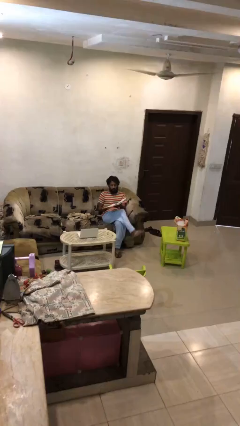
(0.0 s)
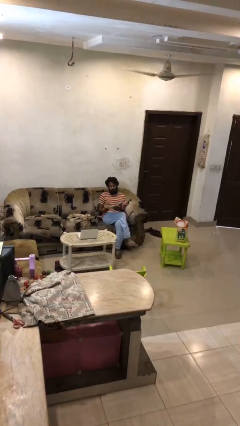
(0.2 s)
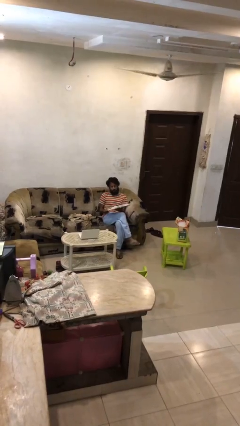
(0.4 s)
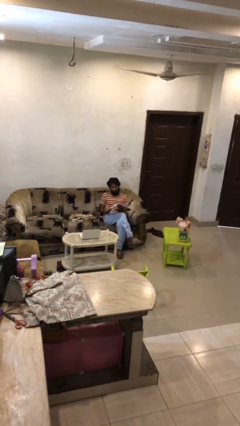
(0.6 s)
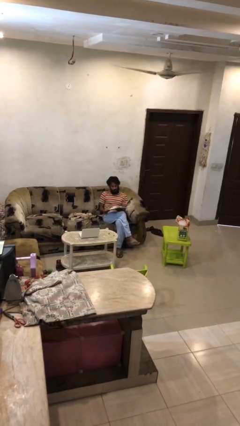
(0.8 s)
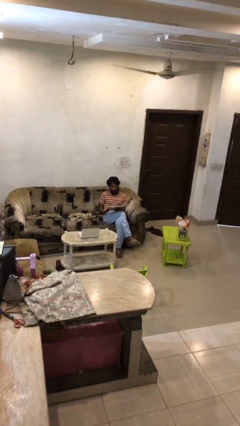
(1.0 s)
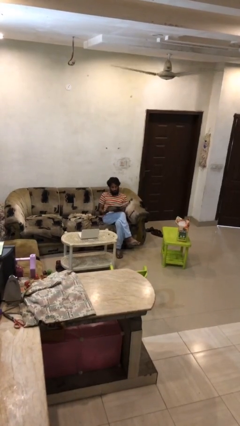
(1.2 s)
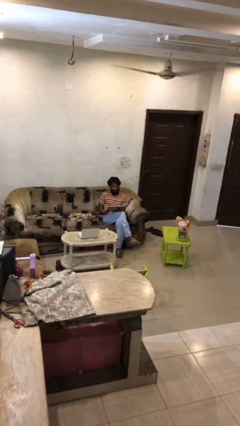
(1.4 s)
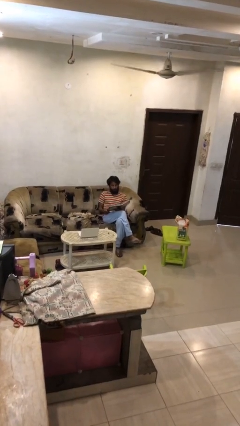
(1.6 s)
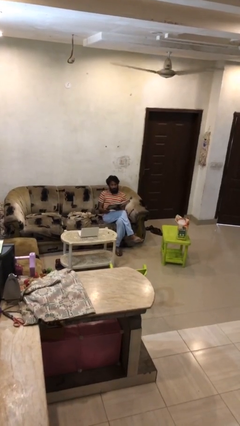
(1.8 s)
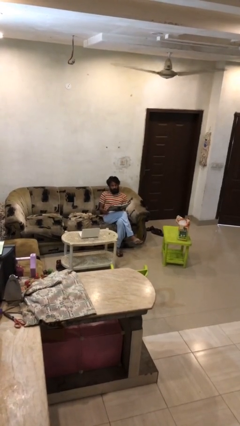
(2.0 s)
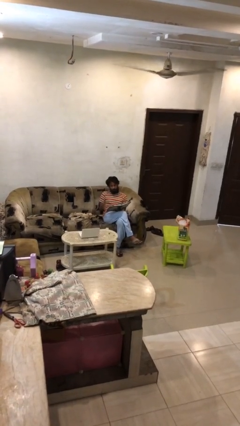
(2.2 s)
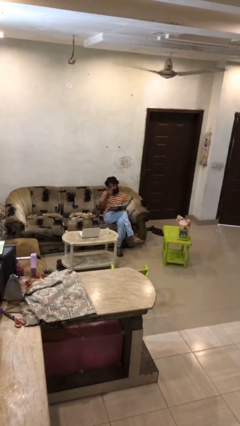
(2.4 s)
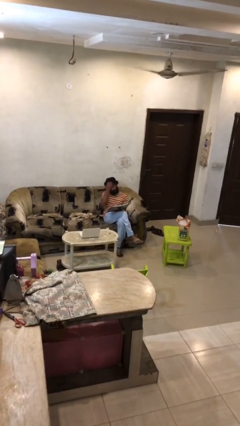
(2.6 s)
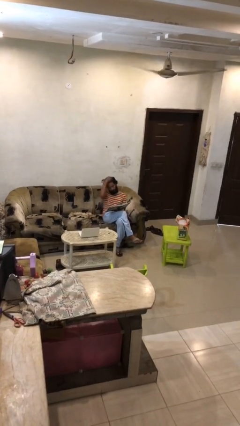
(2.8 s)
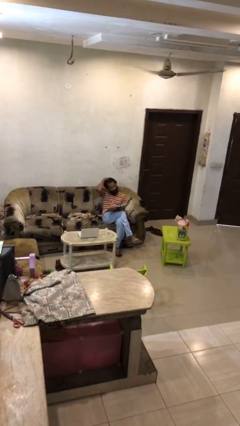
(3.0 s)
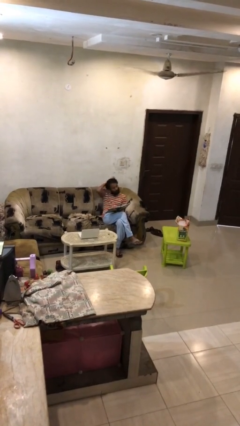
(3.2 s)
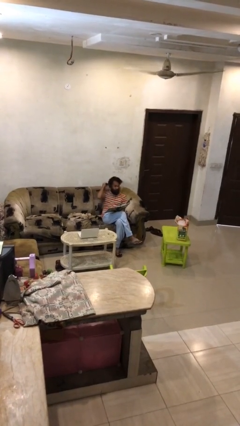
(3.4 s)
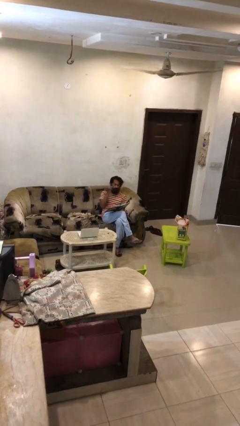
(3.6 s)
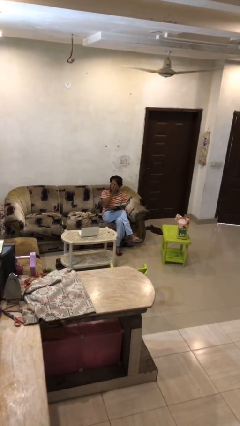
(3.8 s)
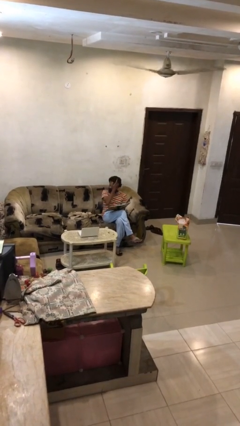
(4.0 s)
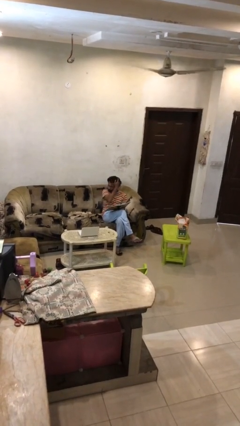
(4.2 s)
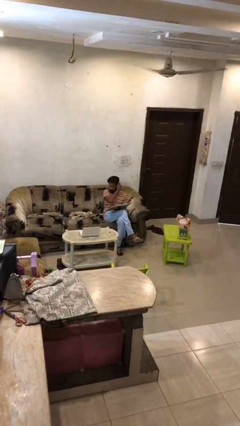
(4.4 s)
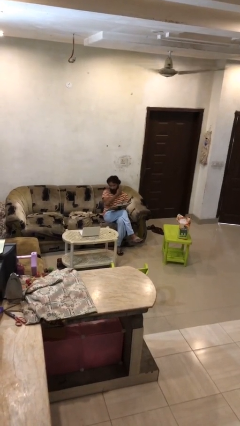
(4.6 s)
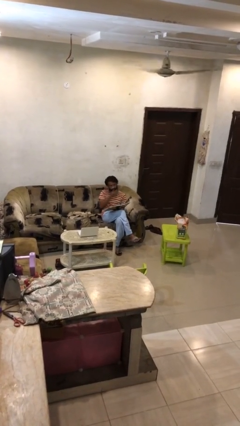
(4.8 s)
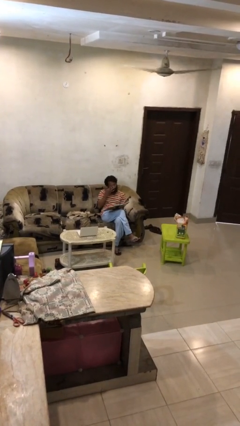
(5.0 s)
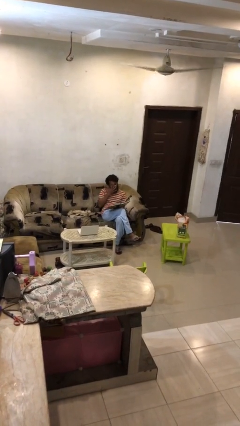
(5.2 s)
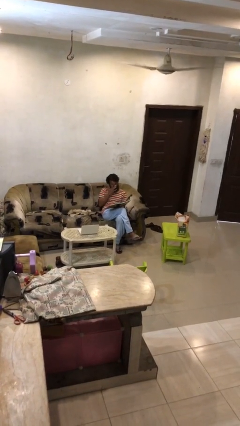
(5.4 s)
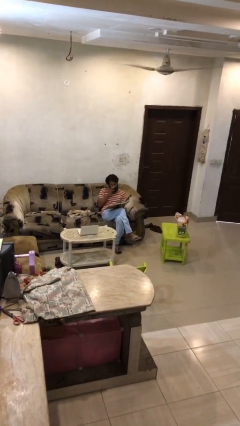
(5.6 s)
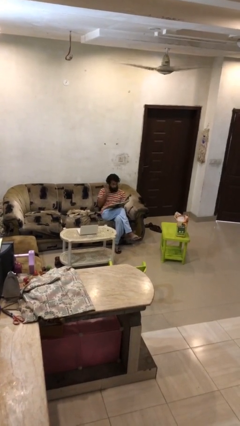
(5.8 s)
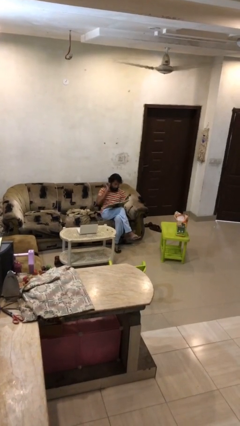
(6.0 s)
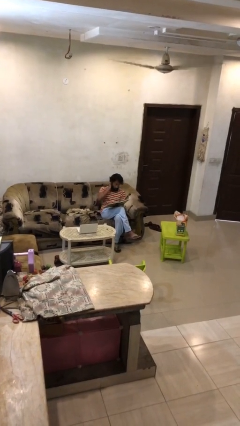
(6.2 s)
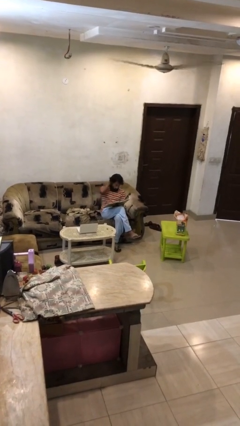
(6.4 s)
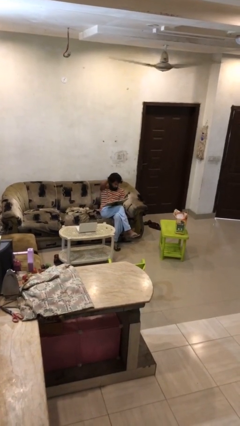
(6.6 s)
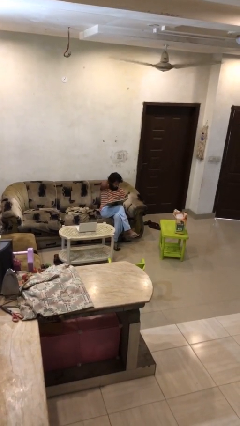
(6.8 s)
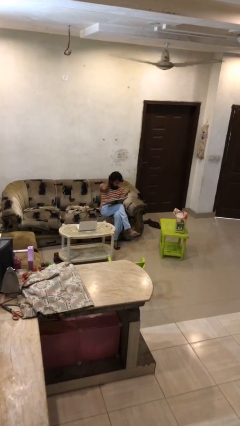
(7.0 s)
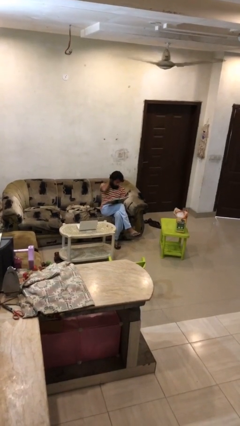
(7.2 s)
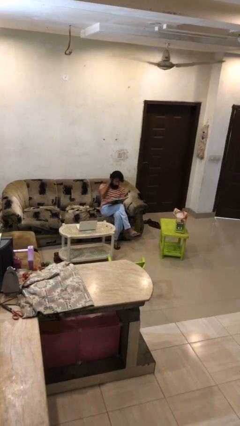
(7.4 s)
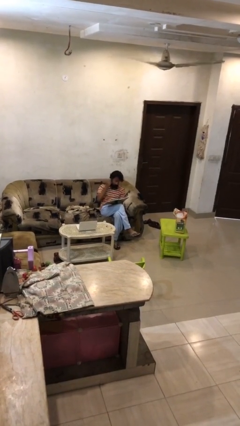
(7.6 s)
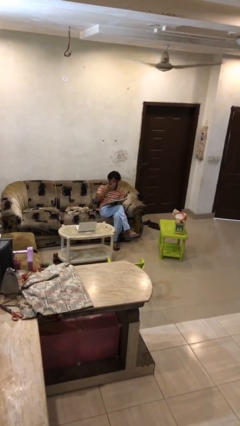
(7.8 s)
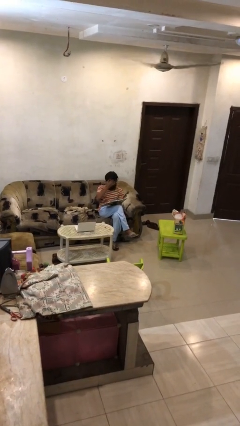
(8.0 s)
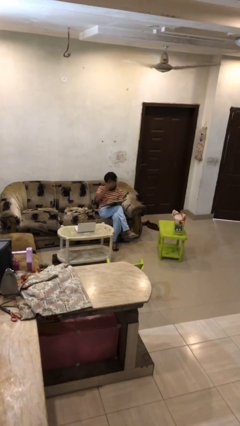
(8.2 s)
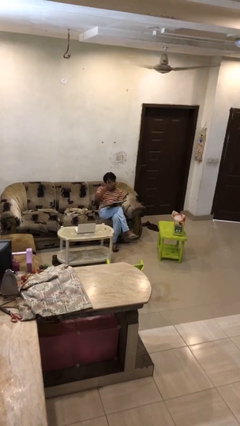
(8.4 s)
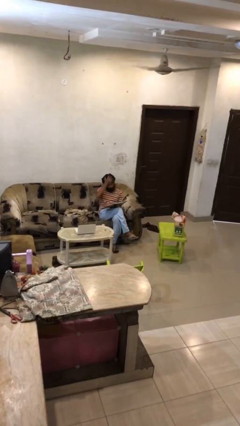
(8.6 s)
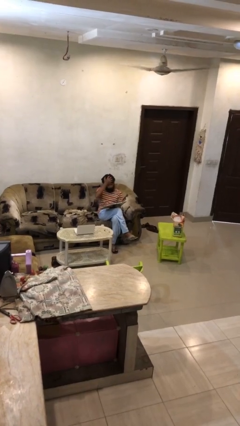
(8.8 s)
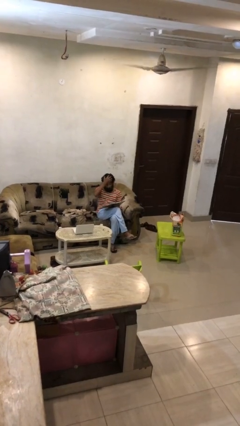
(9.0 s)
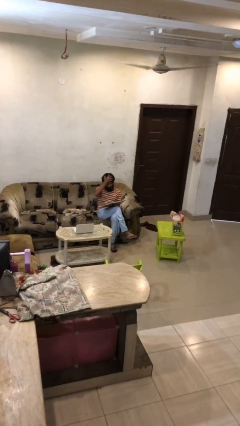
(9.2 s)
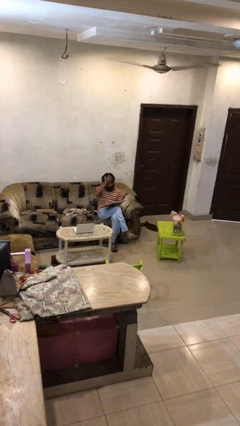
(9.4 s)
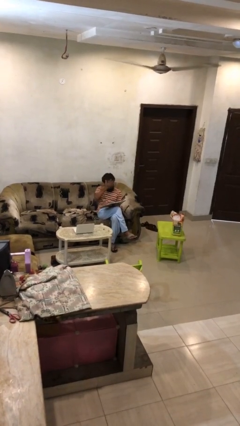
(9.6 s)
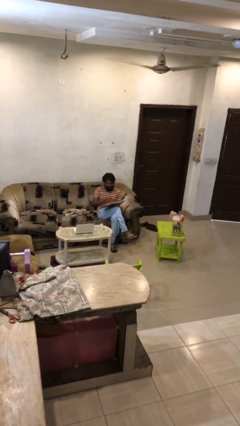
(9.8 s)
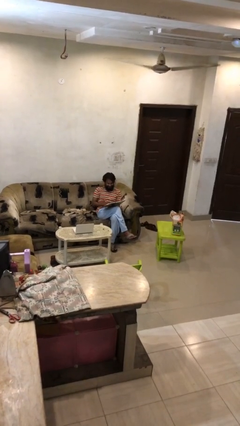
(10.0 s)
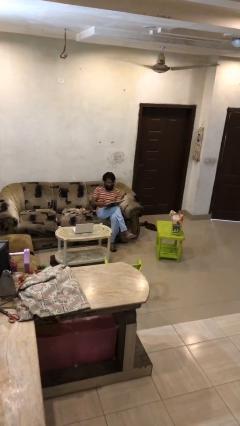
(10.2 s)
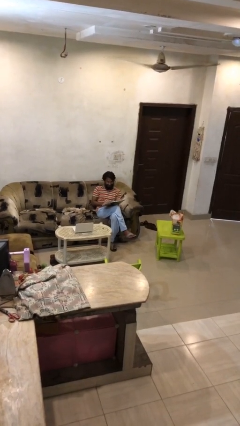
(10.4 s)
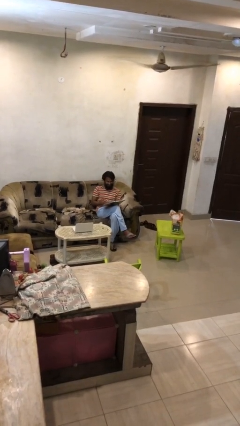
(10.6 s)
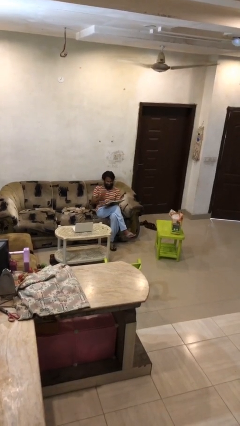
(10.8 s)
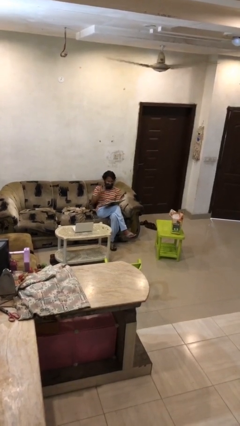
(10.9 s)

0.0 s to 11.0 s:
person reads document

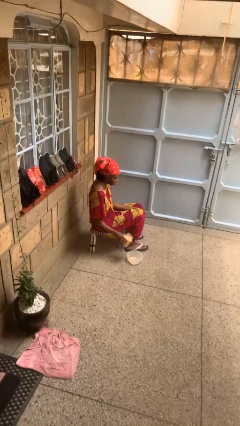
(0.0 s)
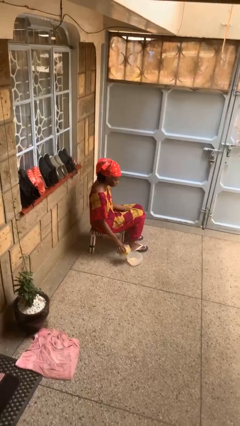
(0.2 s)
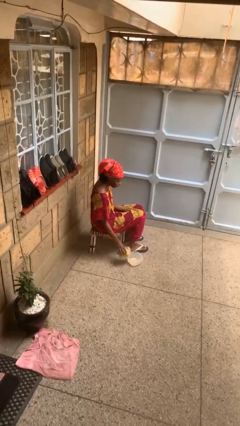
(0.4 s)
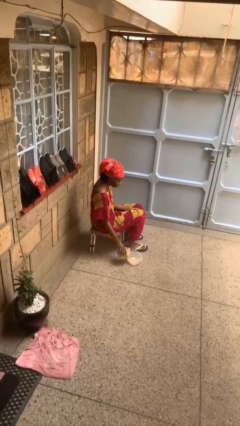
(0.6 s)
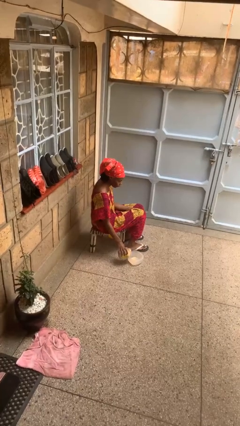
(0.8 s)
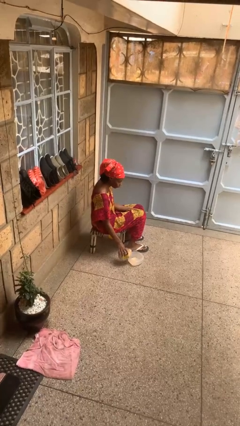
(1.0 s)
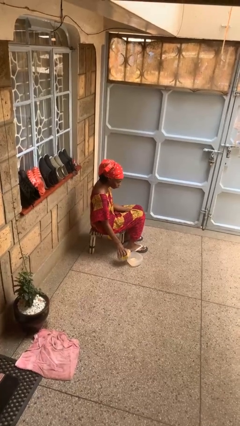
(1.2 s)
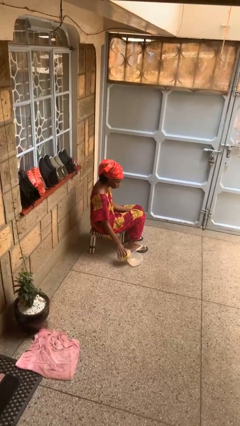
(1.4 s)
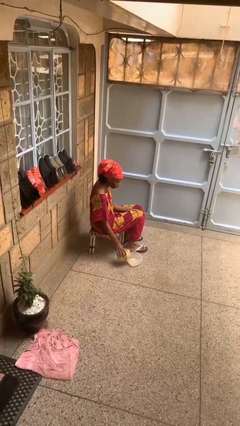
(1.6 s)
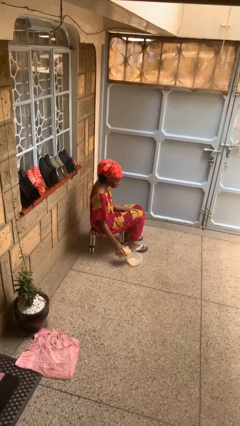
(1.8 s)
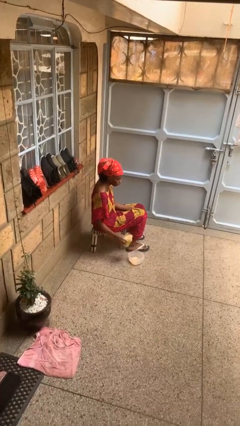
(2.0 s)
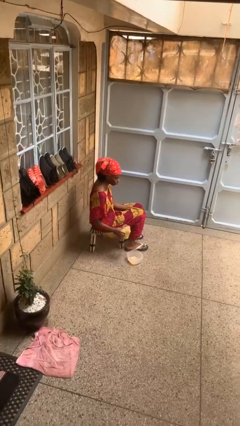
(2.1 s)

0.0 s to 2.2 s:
person pours into bowl

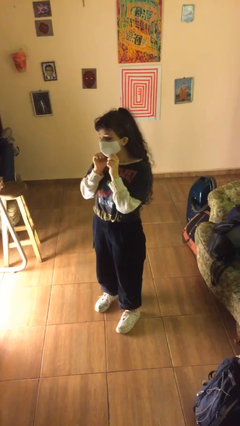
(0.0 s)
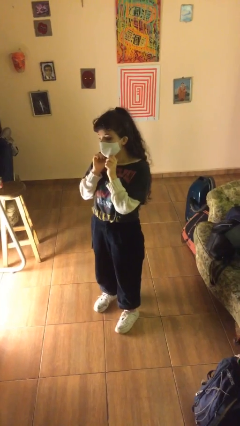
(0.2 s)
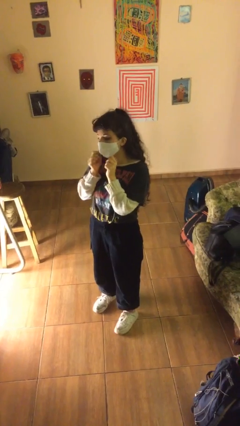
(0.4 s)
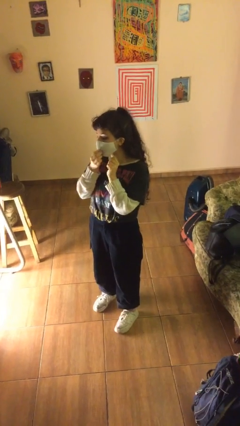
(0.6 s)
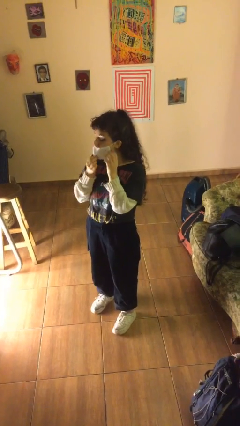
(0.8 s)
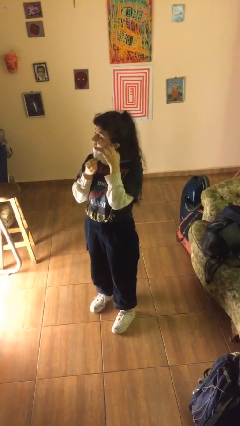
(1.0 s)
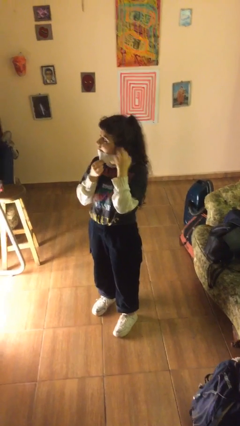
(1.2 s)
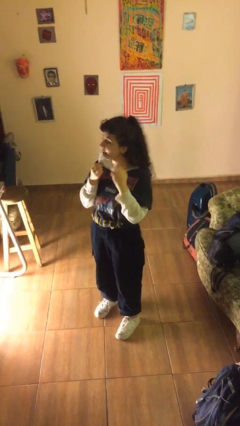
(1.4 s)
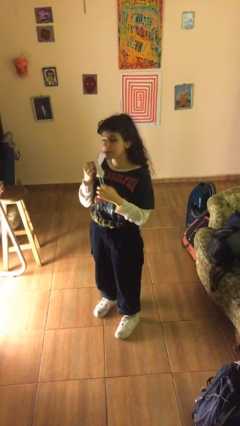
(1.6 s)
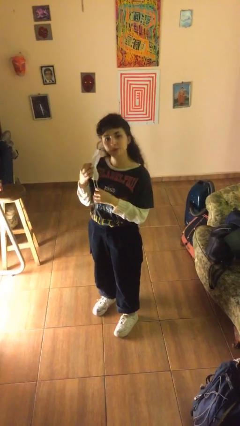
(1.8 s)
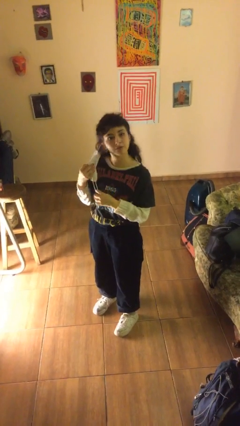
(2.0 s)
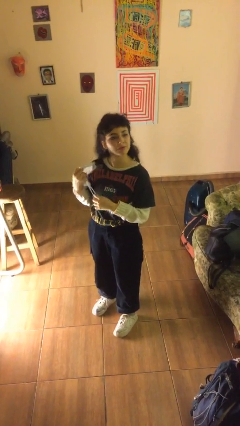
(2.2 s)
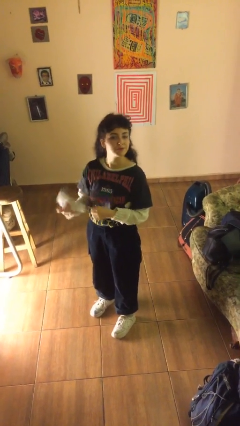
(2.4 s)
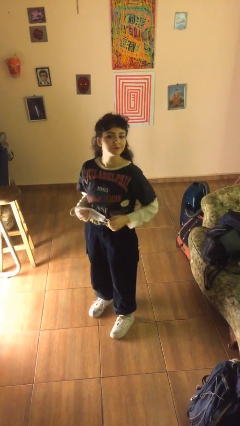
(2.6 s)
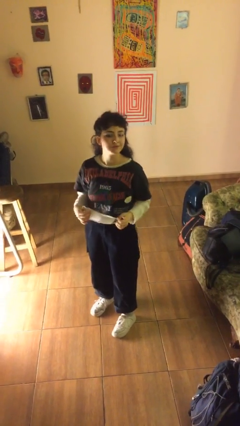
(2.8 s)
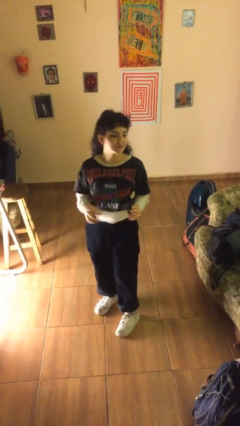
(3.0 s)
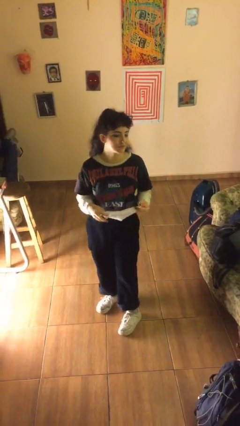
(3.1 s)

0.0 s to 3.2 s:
person takes off facemask

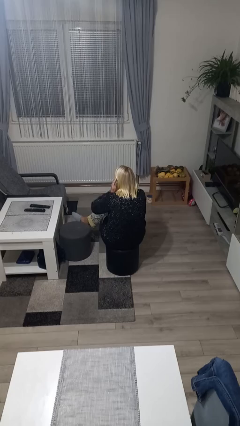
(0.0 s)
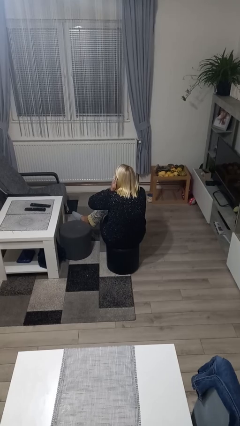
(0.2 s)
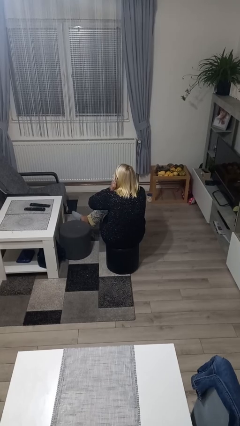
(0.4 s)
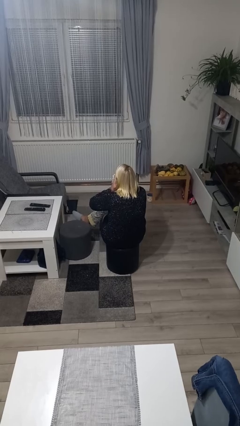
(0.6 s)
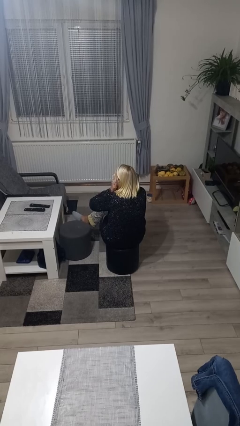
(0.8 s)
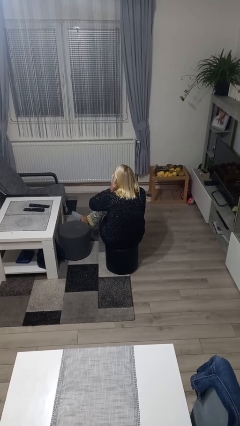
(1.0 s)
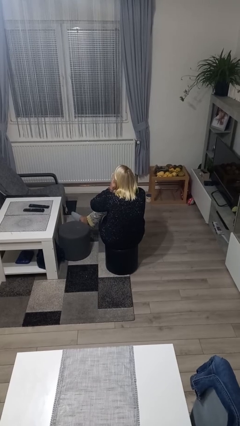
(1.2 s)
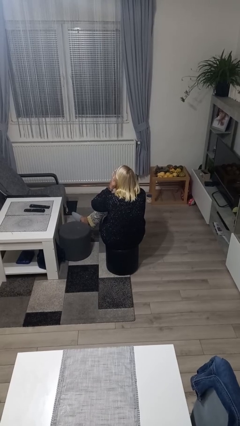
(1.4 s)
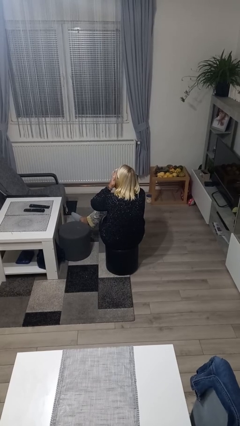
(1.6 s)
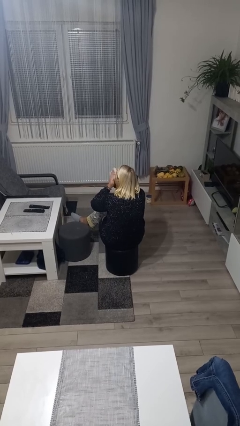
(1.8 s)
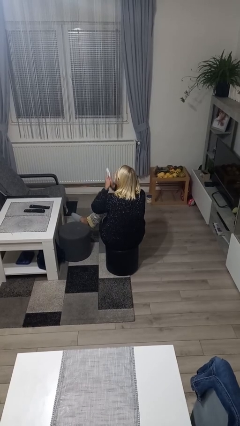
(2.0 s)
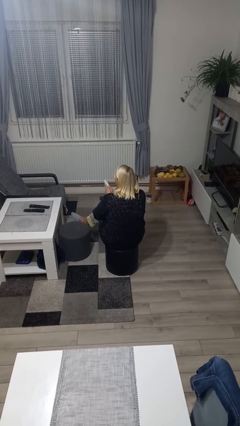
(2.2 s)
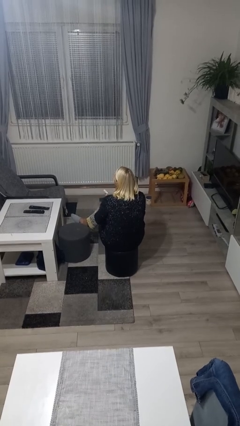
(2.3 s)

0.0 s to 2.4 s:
person blows nose
